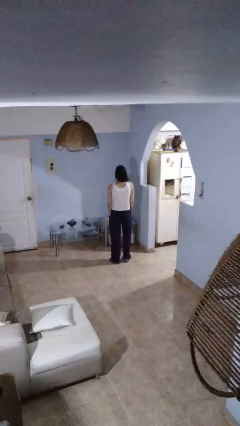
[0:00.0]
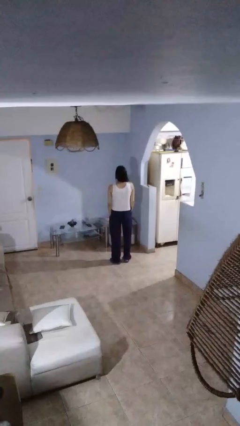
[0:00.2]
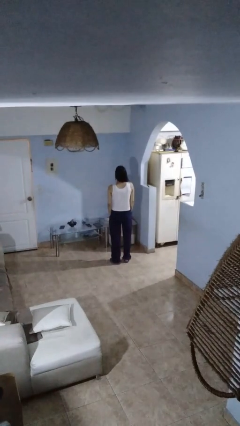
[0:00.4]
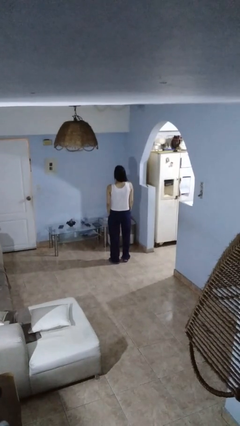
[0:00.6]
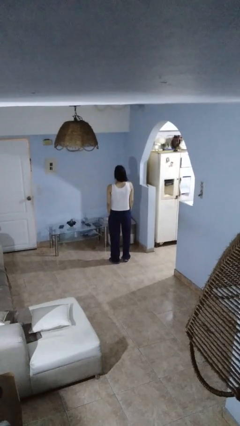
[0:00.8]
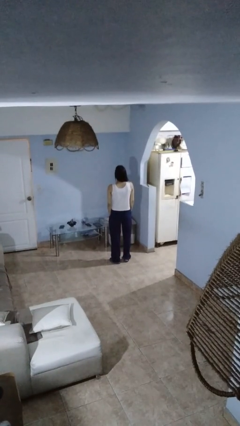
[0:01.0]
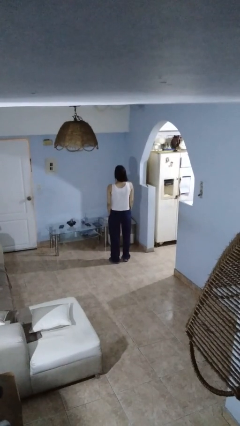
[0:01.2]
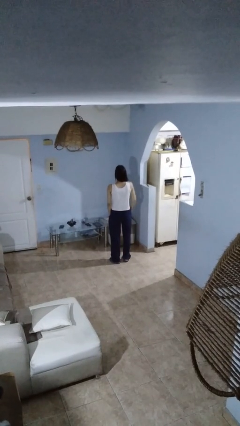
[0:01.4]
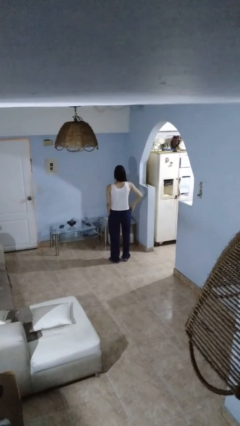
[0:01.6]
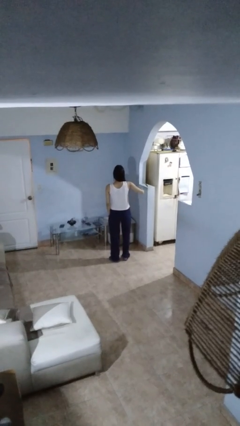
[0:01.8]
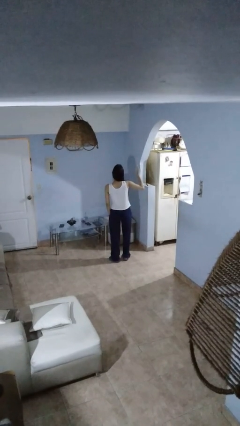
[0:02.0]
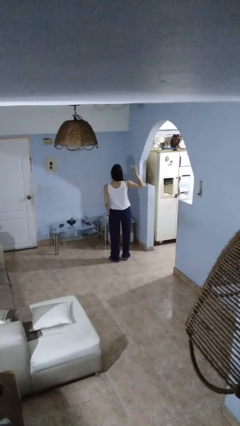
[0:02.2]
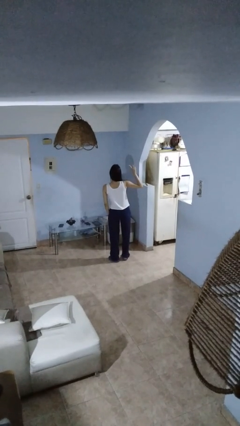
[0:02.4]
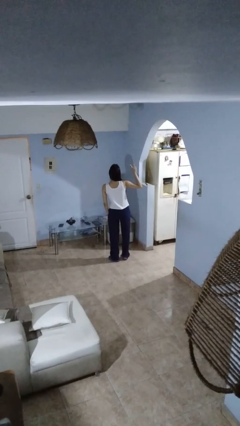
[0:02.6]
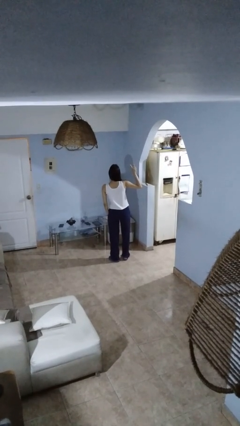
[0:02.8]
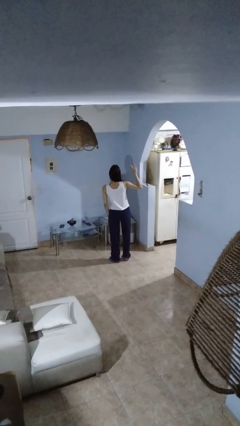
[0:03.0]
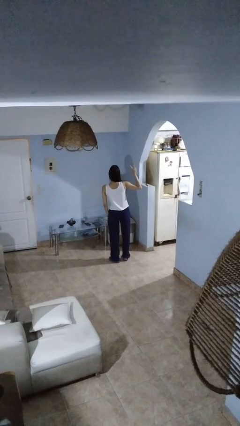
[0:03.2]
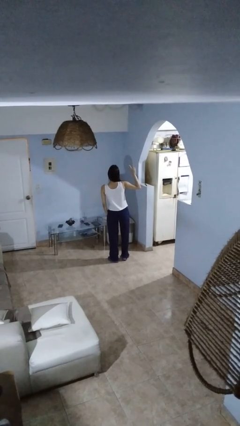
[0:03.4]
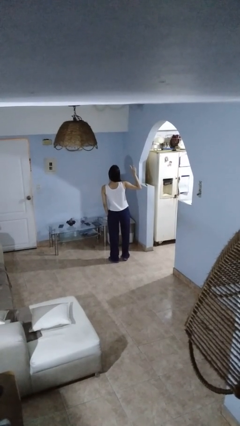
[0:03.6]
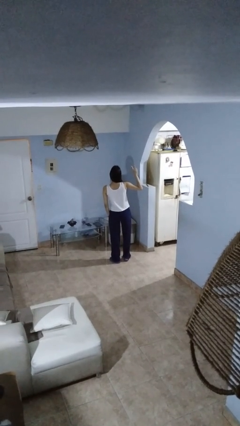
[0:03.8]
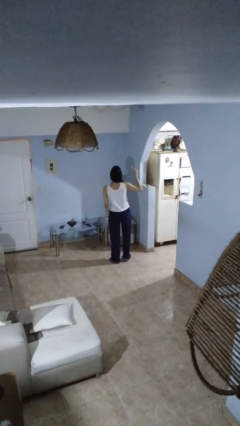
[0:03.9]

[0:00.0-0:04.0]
person gestures peace

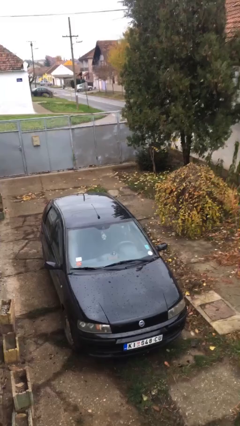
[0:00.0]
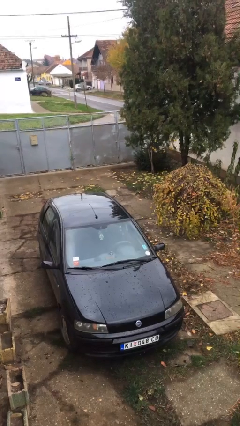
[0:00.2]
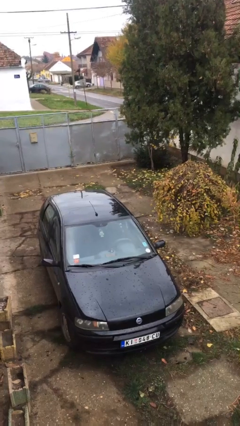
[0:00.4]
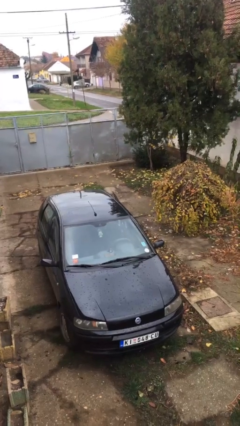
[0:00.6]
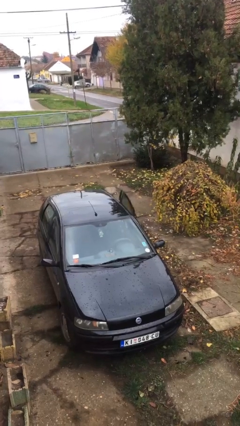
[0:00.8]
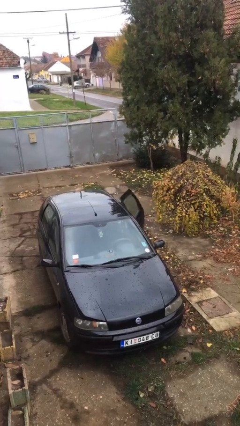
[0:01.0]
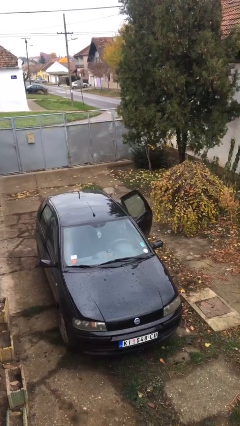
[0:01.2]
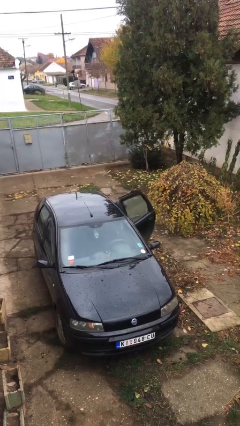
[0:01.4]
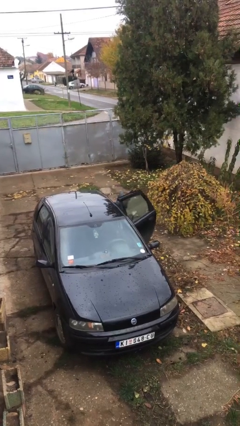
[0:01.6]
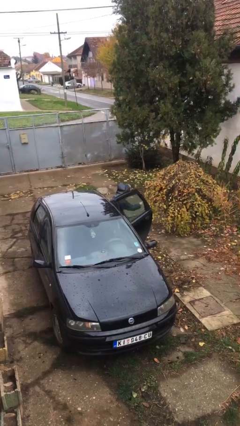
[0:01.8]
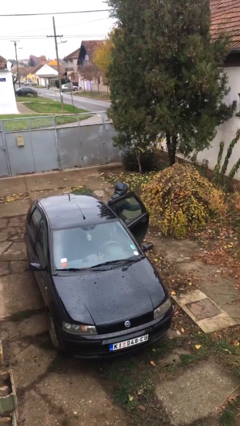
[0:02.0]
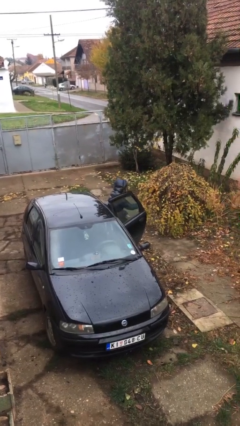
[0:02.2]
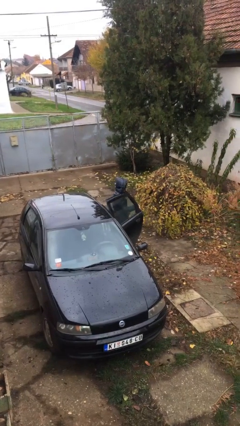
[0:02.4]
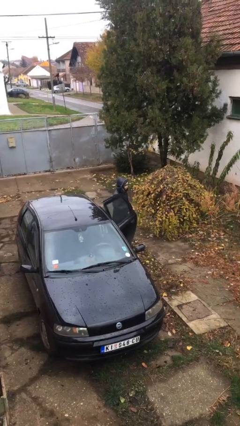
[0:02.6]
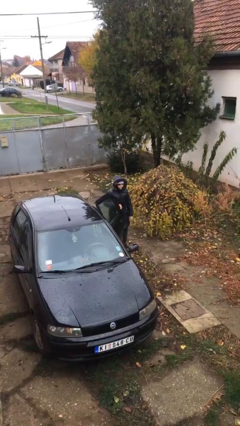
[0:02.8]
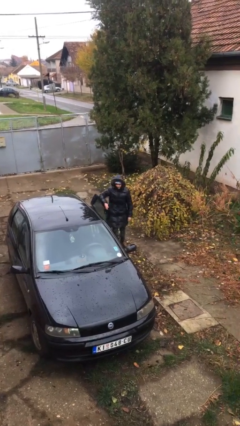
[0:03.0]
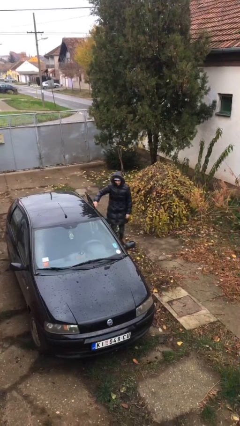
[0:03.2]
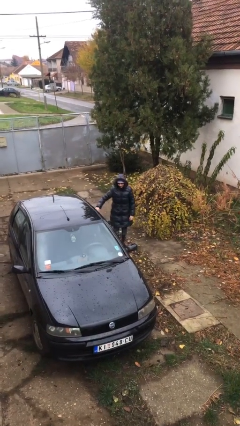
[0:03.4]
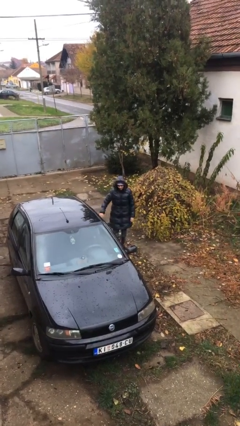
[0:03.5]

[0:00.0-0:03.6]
person exits car

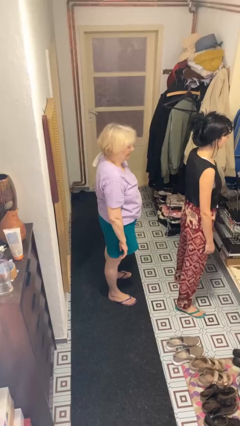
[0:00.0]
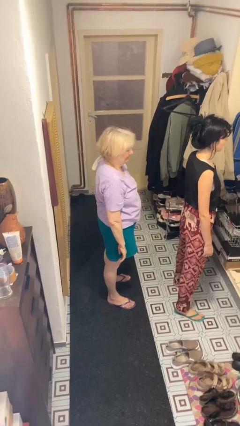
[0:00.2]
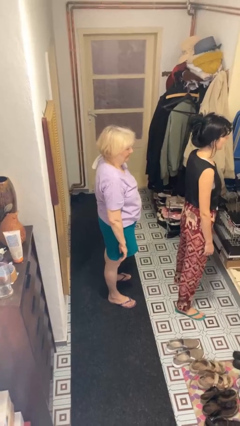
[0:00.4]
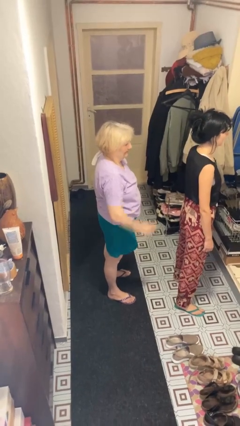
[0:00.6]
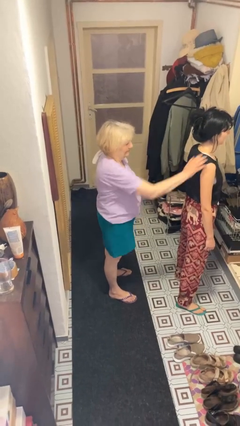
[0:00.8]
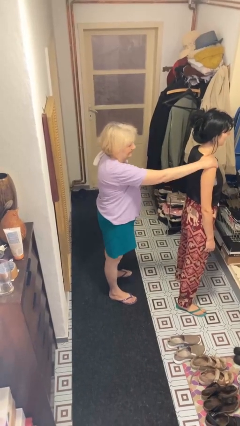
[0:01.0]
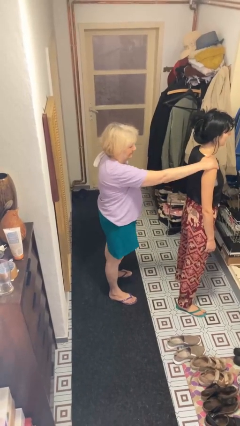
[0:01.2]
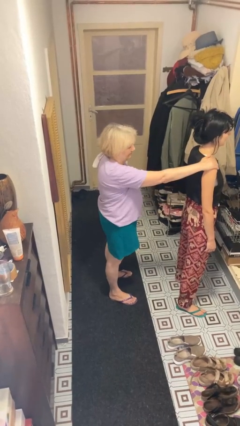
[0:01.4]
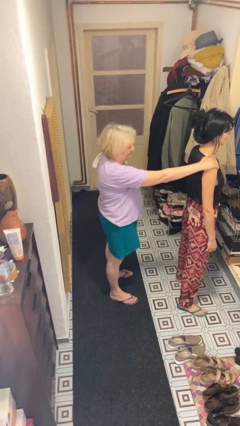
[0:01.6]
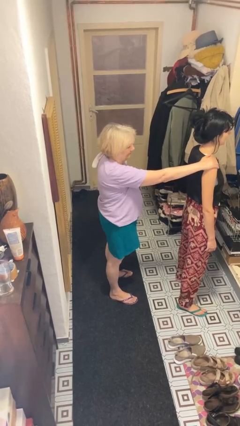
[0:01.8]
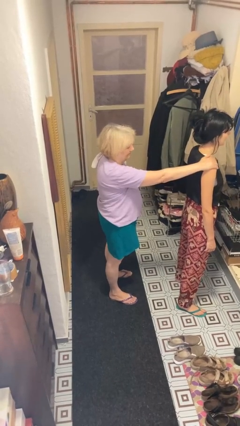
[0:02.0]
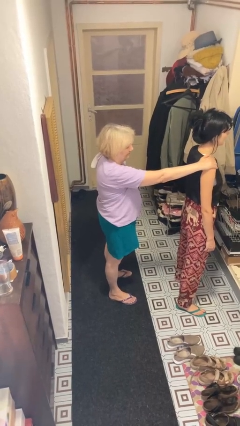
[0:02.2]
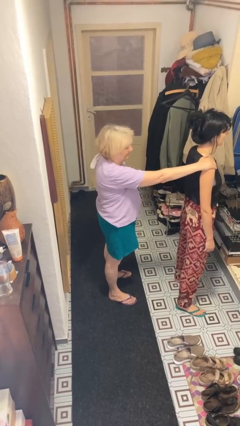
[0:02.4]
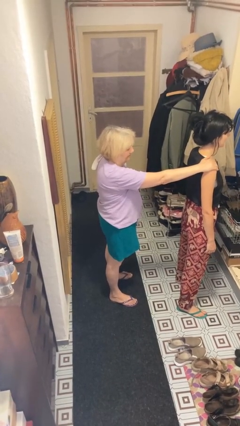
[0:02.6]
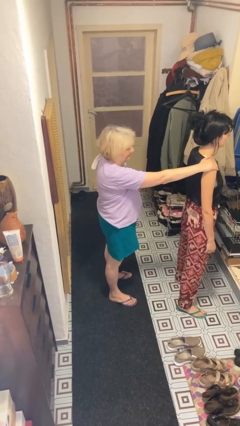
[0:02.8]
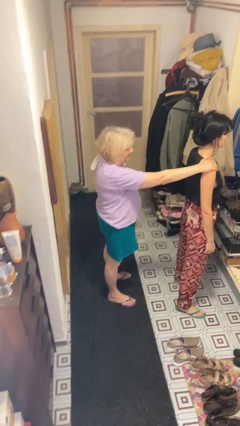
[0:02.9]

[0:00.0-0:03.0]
person grabs person by shoulder

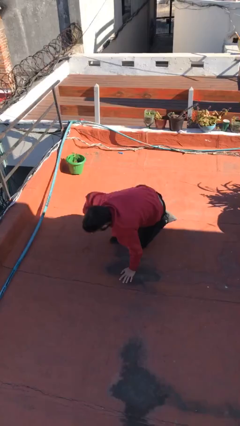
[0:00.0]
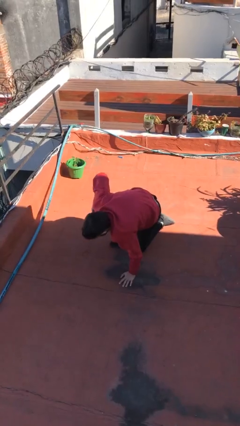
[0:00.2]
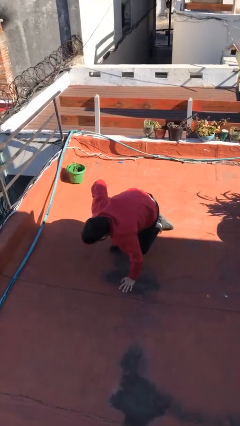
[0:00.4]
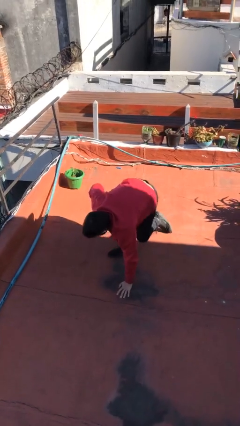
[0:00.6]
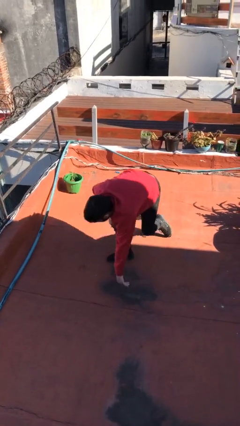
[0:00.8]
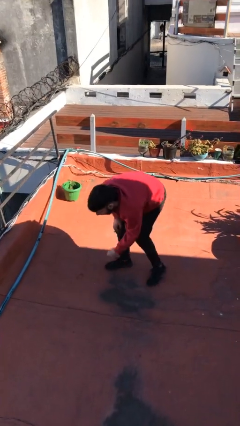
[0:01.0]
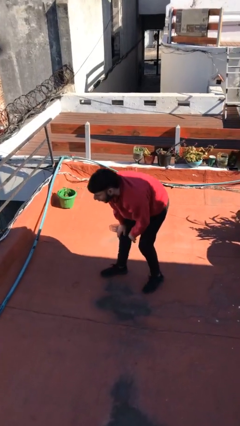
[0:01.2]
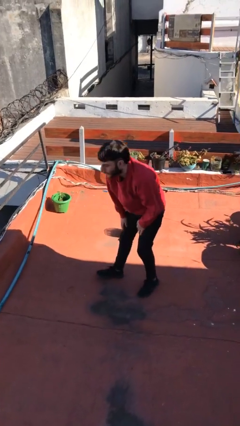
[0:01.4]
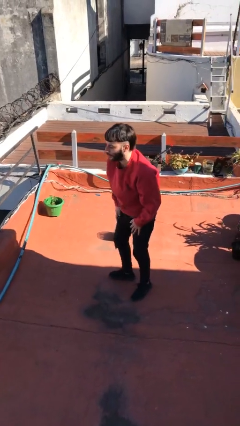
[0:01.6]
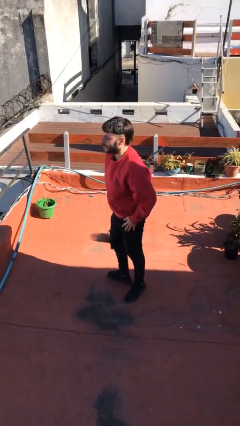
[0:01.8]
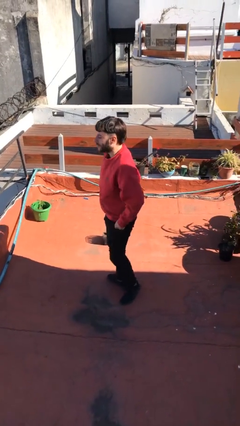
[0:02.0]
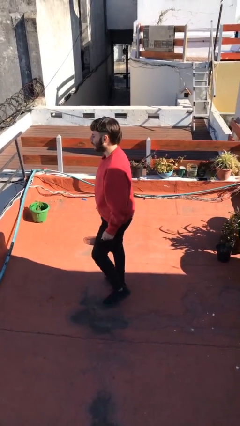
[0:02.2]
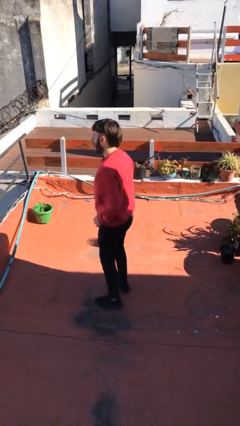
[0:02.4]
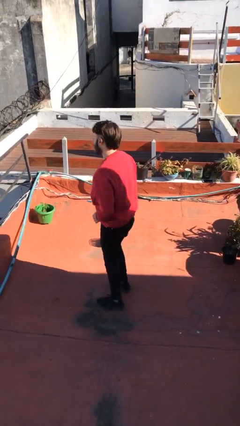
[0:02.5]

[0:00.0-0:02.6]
person stands up from floor

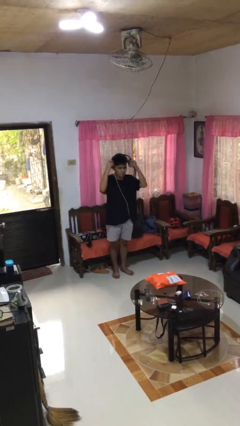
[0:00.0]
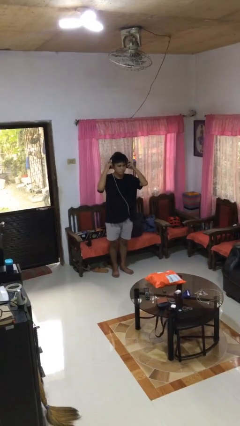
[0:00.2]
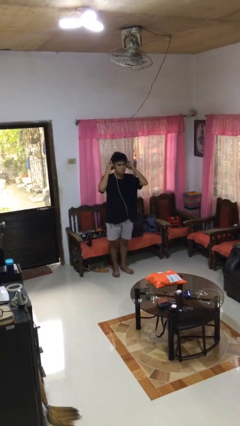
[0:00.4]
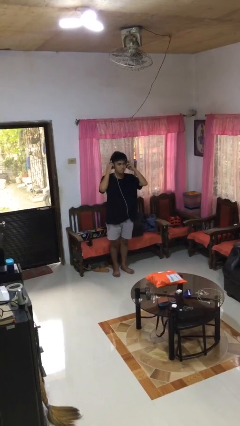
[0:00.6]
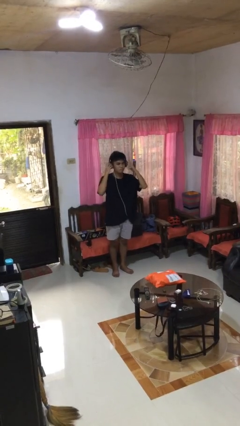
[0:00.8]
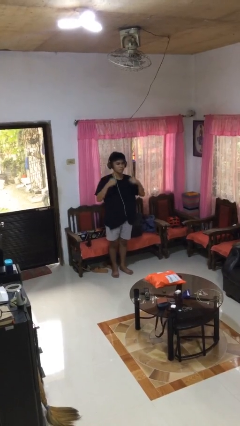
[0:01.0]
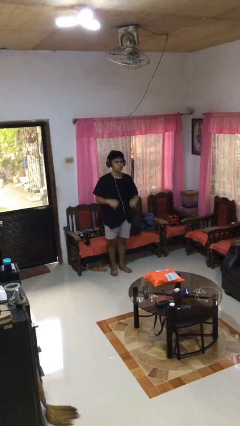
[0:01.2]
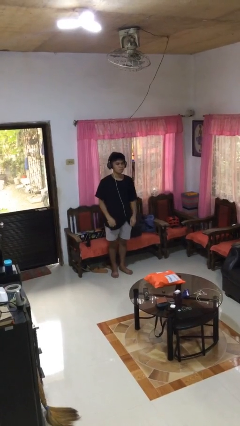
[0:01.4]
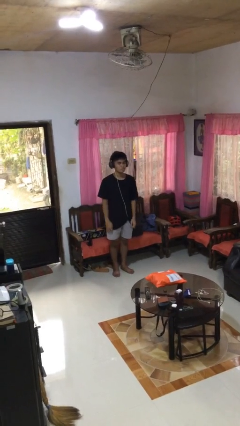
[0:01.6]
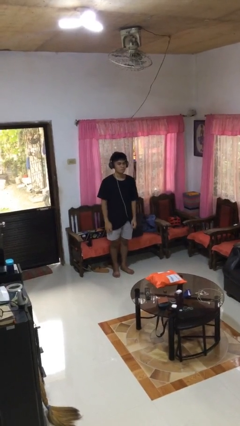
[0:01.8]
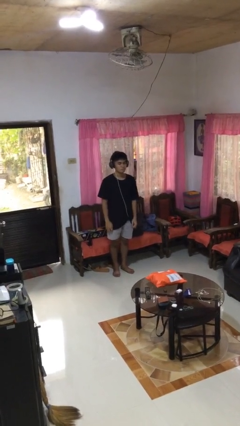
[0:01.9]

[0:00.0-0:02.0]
person puts on headphones

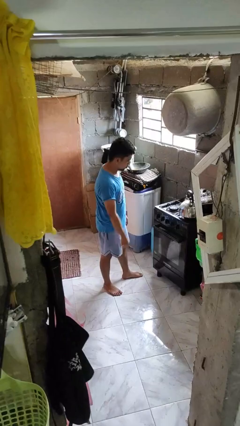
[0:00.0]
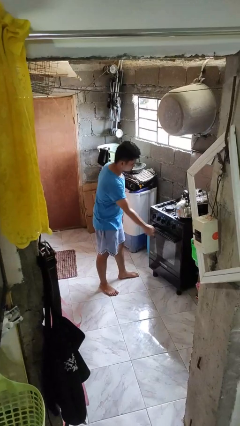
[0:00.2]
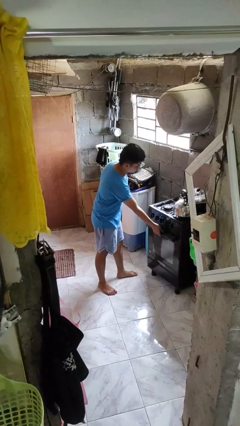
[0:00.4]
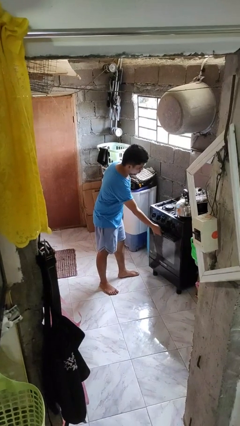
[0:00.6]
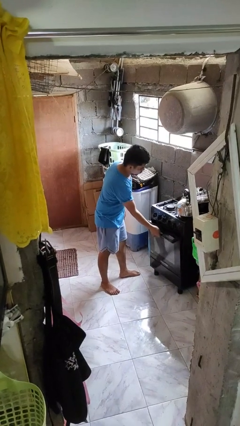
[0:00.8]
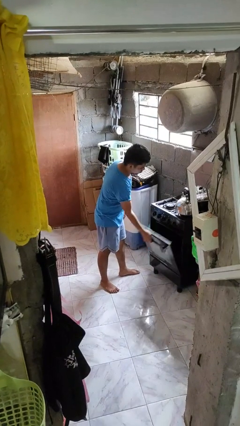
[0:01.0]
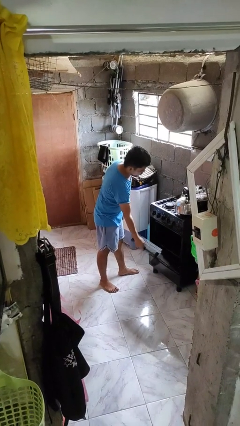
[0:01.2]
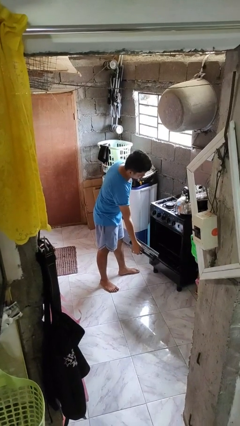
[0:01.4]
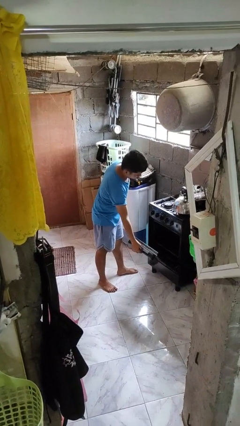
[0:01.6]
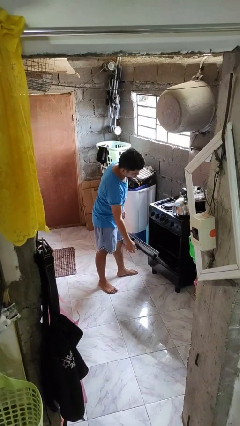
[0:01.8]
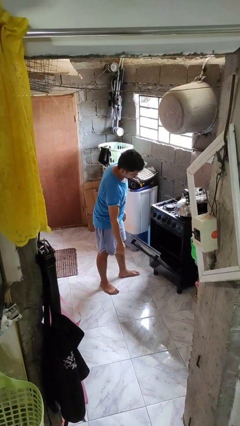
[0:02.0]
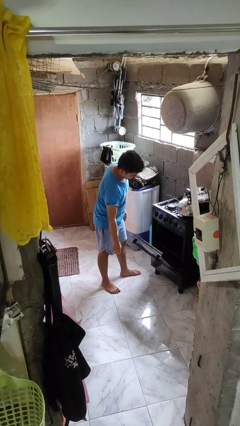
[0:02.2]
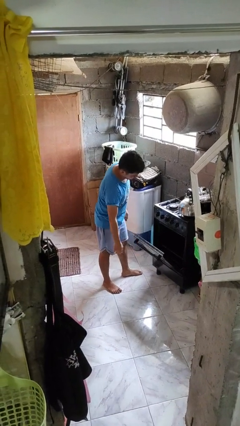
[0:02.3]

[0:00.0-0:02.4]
person opens oven door
